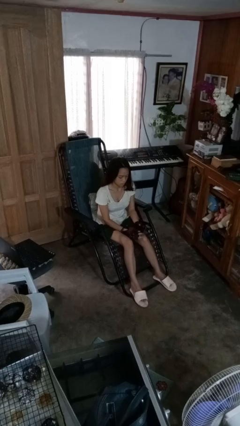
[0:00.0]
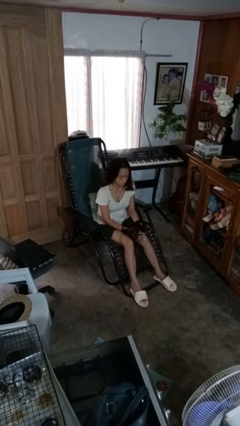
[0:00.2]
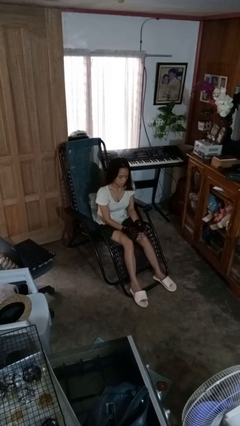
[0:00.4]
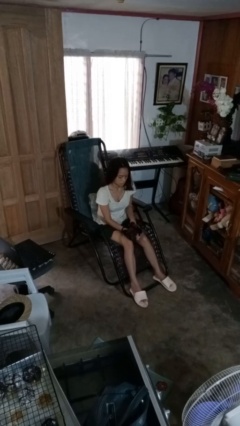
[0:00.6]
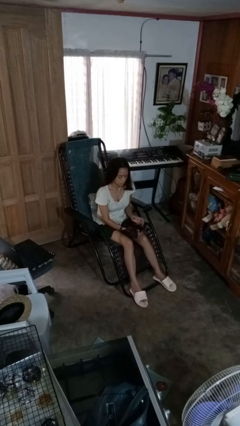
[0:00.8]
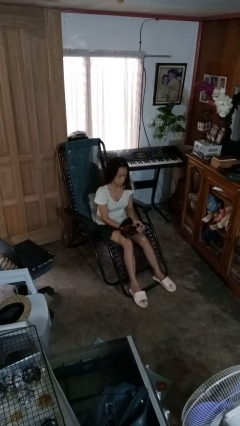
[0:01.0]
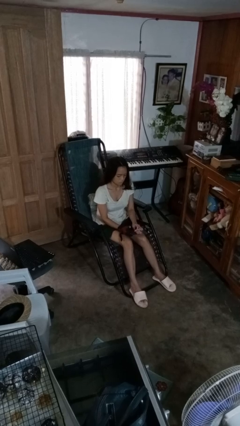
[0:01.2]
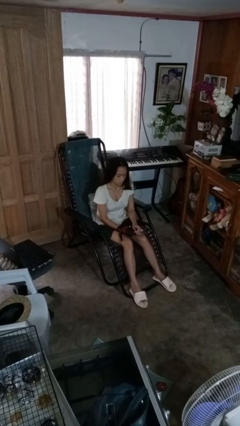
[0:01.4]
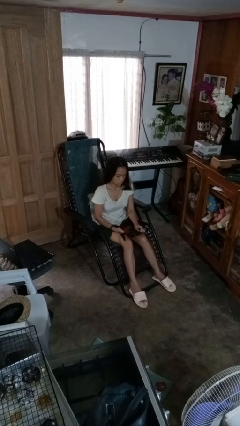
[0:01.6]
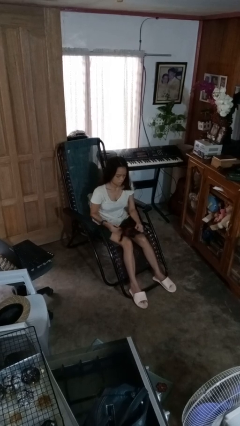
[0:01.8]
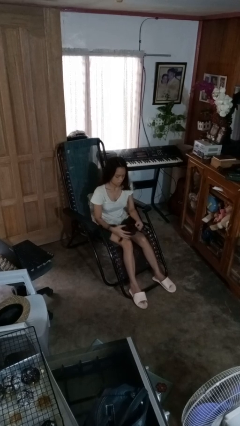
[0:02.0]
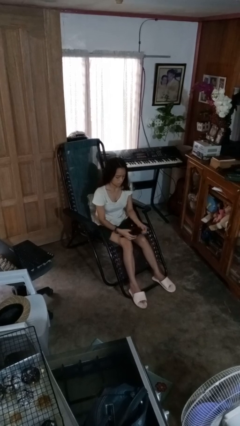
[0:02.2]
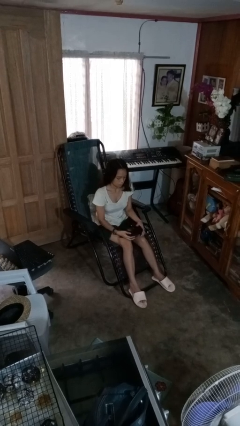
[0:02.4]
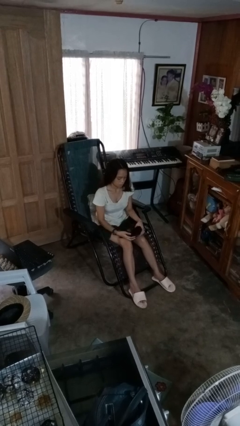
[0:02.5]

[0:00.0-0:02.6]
person takes off gloves

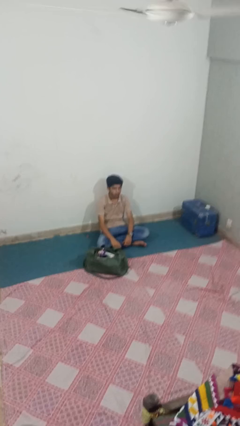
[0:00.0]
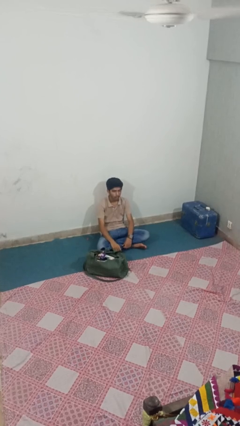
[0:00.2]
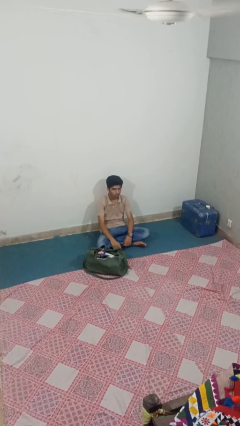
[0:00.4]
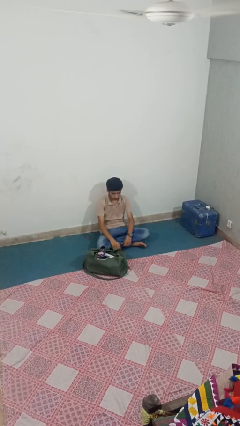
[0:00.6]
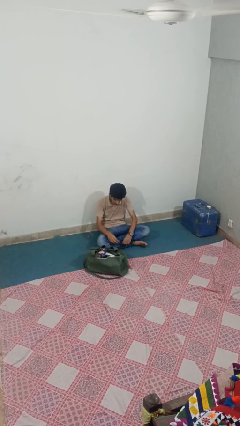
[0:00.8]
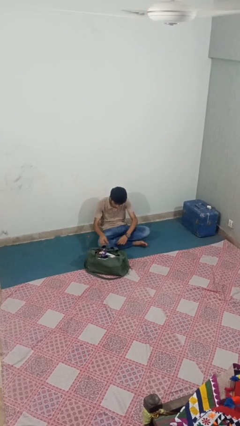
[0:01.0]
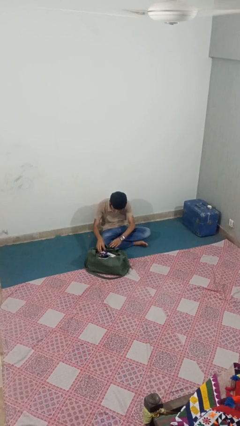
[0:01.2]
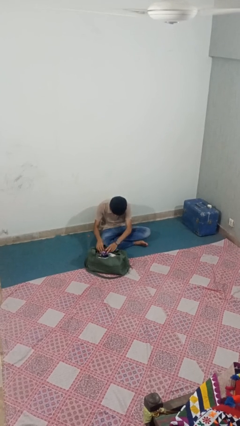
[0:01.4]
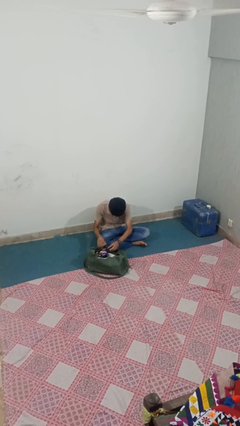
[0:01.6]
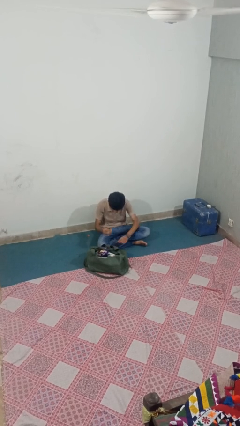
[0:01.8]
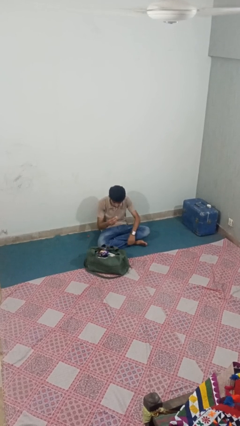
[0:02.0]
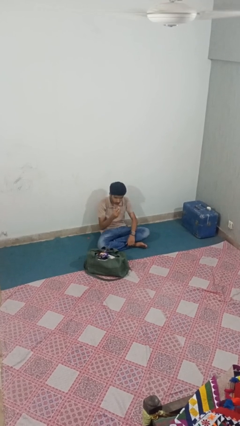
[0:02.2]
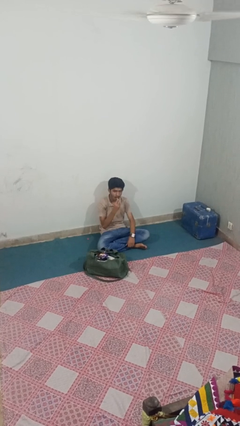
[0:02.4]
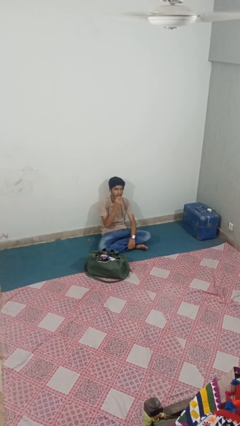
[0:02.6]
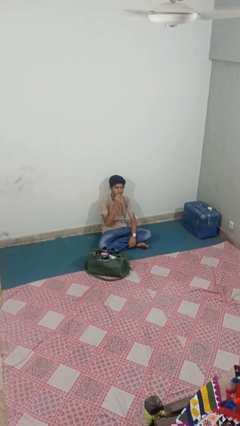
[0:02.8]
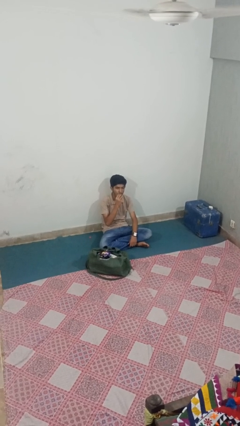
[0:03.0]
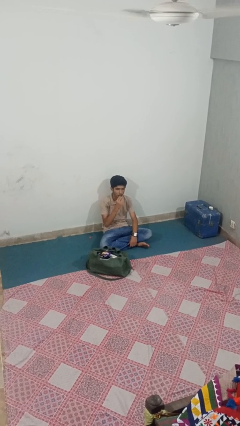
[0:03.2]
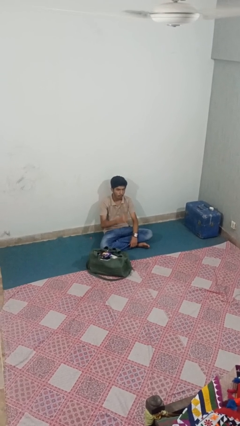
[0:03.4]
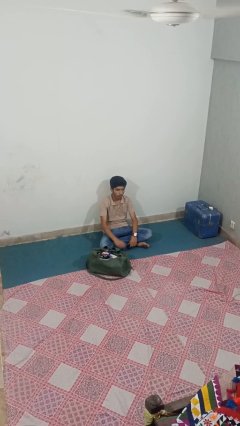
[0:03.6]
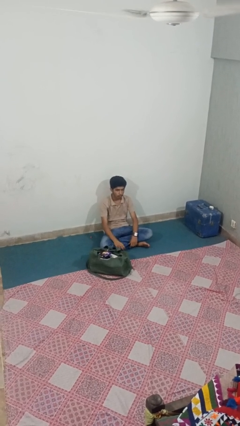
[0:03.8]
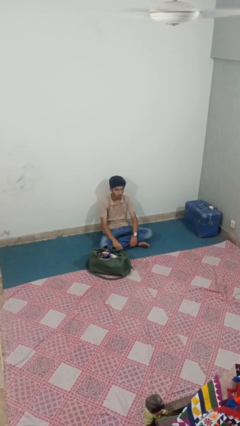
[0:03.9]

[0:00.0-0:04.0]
person eats snack from bag

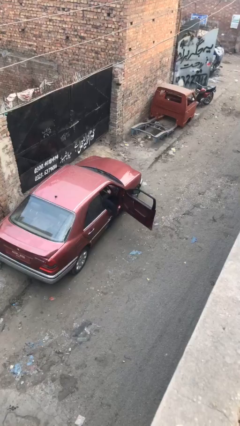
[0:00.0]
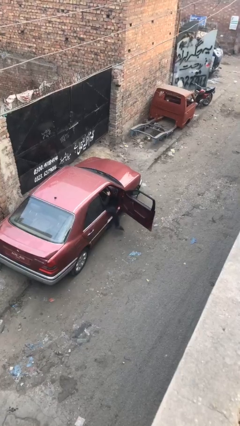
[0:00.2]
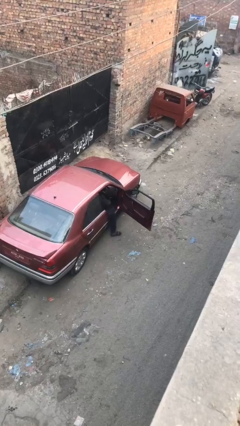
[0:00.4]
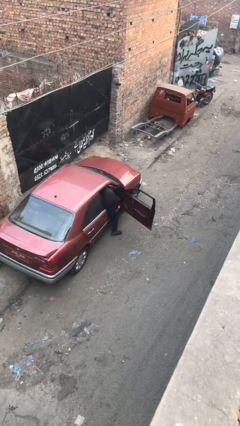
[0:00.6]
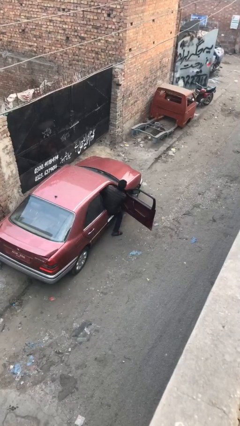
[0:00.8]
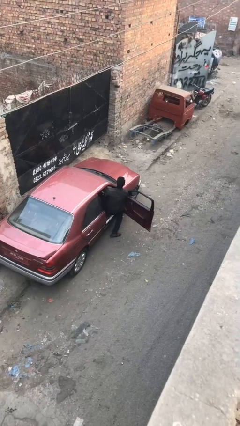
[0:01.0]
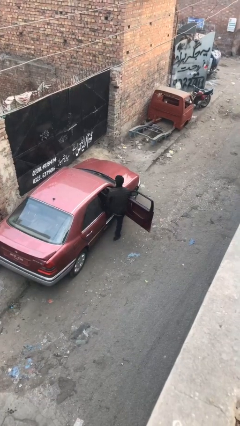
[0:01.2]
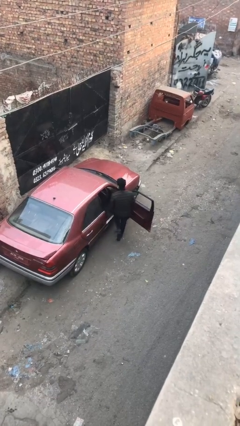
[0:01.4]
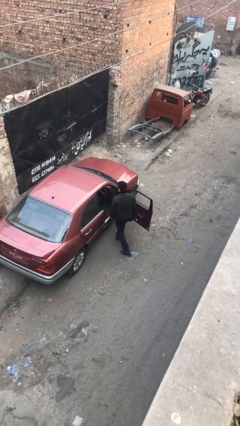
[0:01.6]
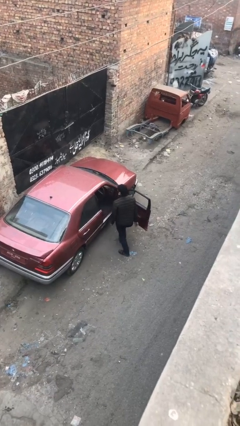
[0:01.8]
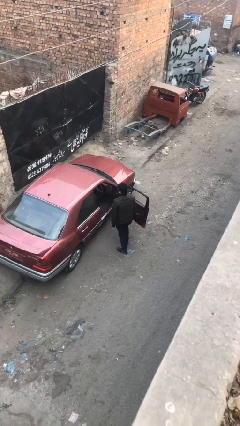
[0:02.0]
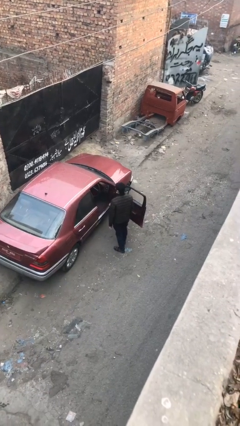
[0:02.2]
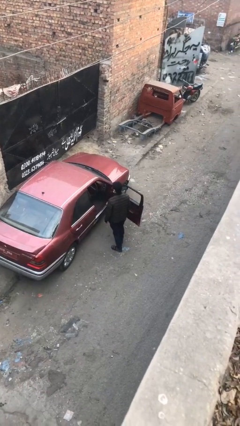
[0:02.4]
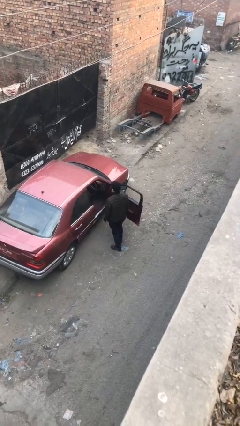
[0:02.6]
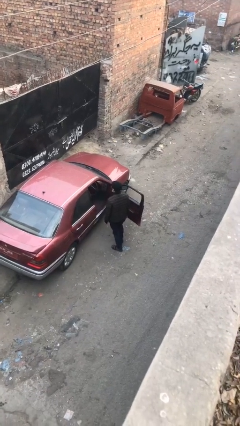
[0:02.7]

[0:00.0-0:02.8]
person exits car

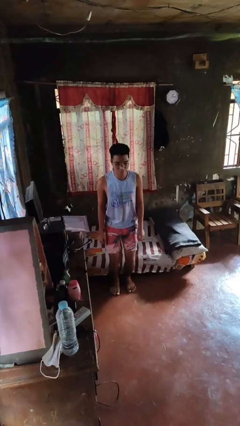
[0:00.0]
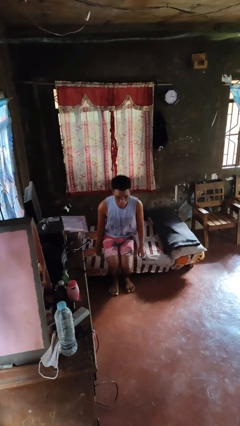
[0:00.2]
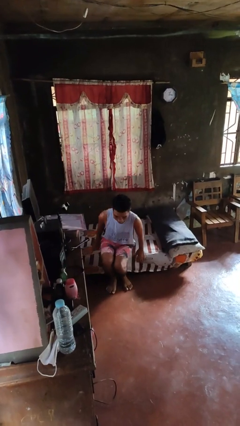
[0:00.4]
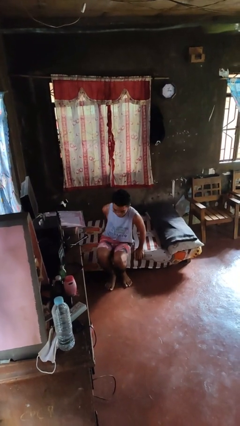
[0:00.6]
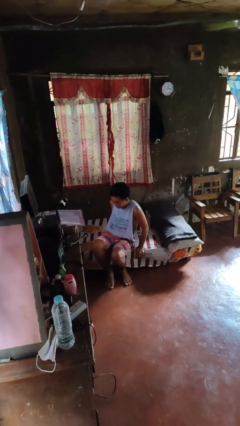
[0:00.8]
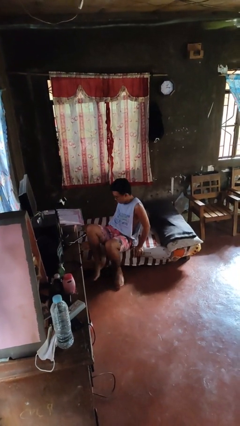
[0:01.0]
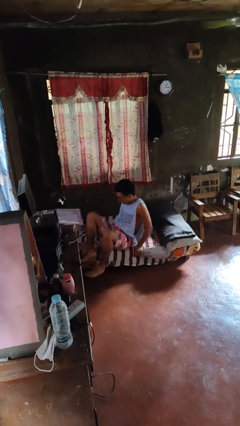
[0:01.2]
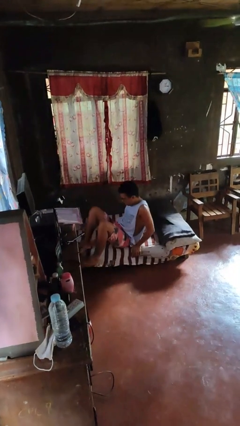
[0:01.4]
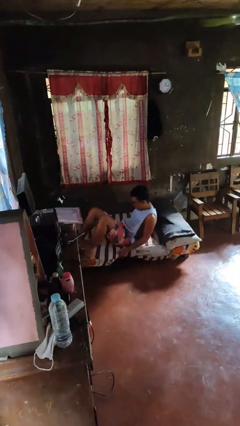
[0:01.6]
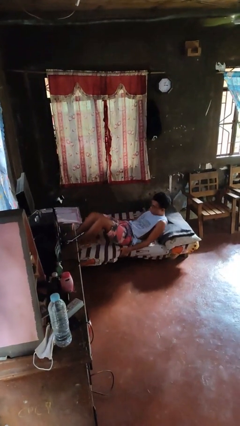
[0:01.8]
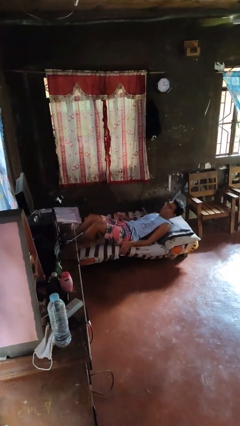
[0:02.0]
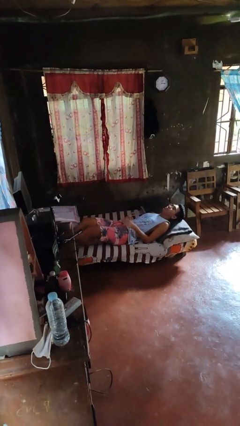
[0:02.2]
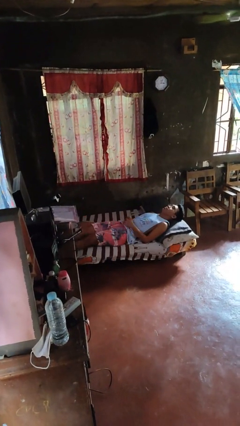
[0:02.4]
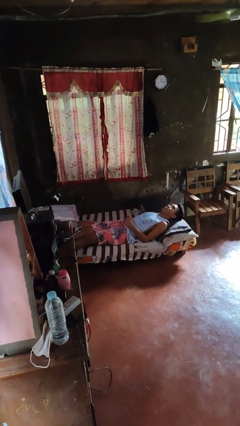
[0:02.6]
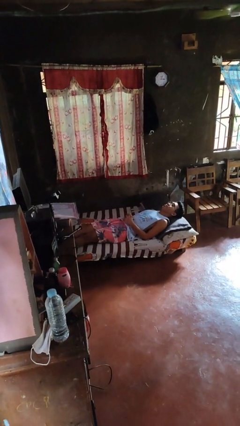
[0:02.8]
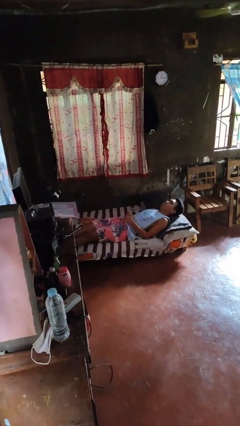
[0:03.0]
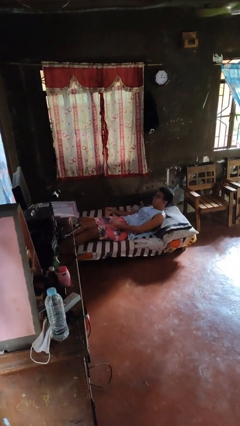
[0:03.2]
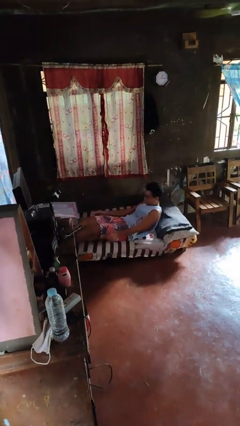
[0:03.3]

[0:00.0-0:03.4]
person lies down on bed

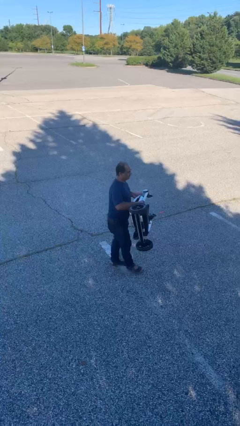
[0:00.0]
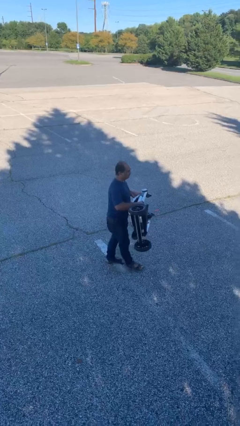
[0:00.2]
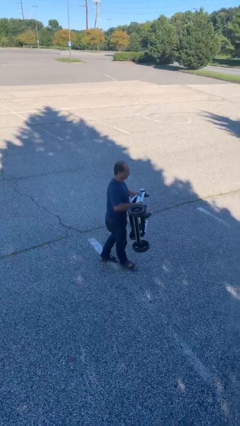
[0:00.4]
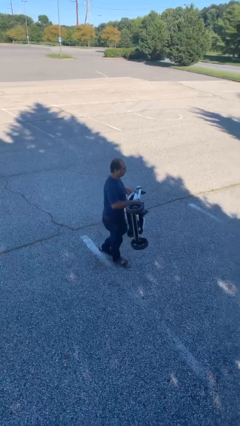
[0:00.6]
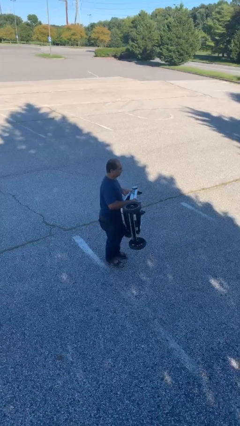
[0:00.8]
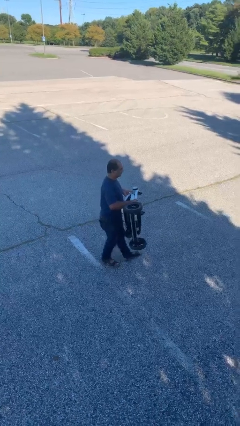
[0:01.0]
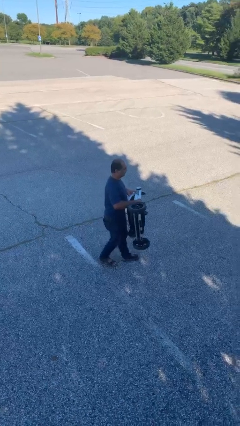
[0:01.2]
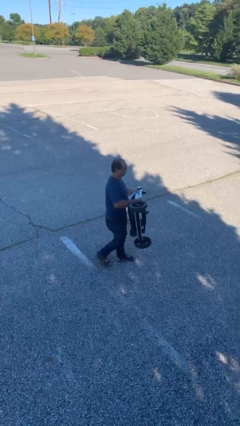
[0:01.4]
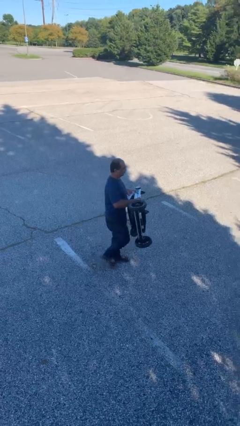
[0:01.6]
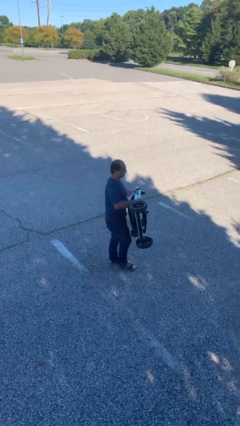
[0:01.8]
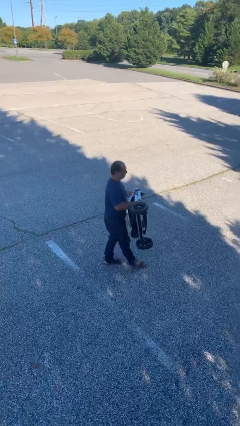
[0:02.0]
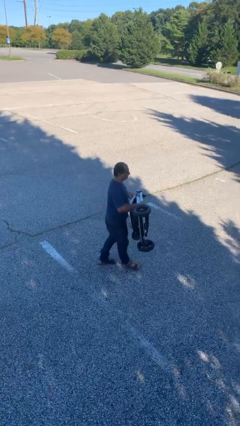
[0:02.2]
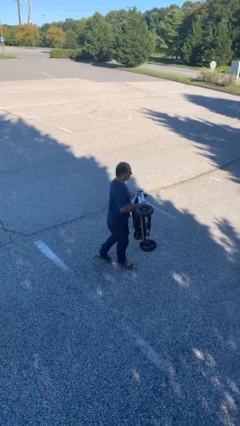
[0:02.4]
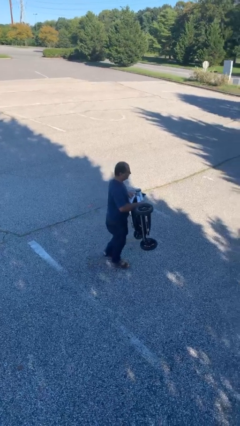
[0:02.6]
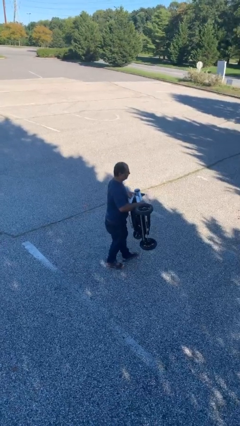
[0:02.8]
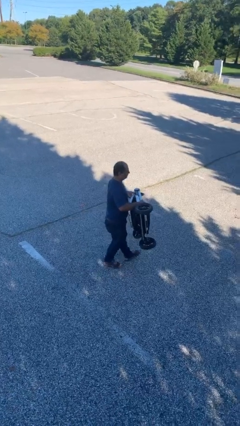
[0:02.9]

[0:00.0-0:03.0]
person carries heavy object

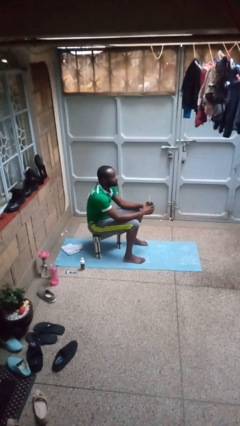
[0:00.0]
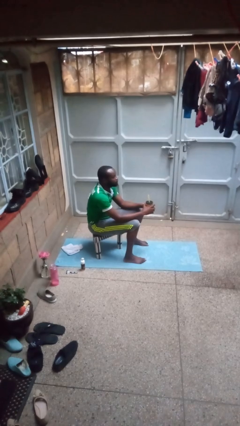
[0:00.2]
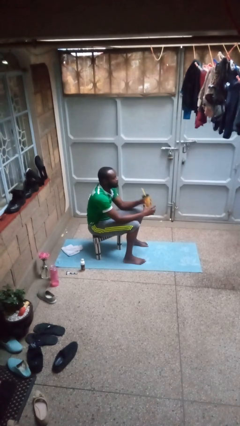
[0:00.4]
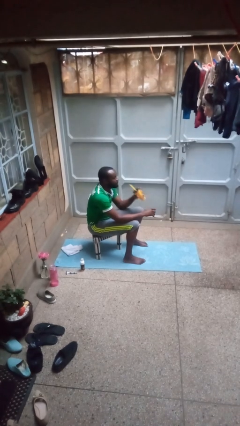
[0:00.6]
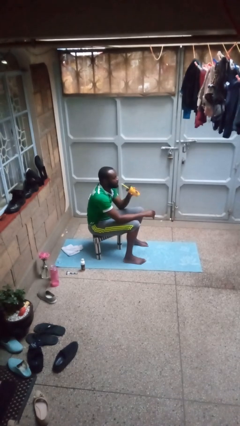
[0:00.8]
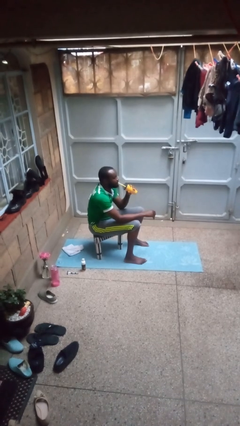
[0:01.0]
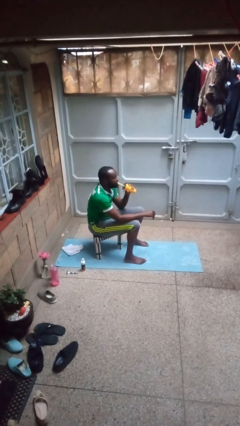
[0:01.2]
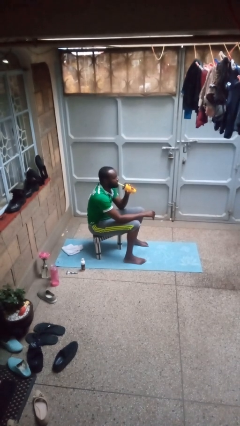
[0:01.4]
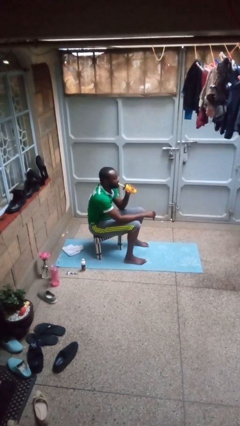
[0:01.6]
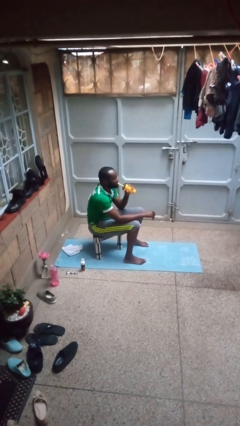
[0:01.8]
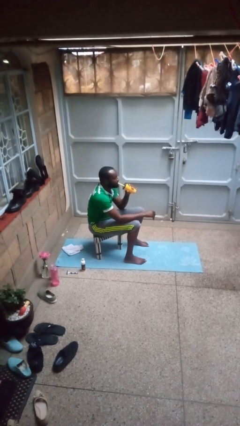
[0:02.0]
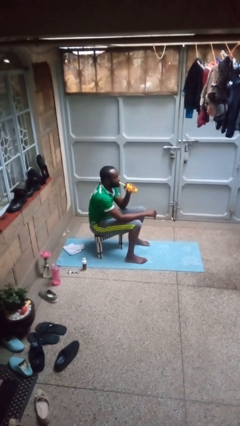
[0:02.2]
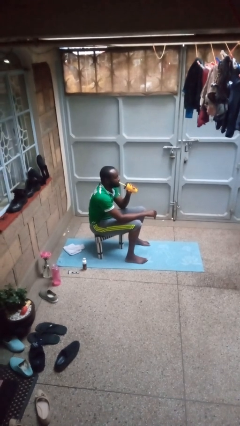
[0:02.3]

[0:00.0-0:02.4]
person drinks from straw
